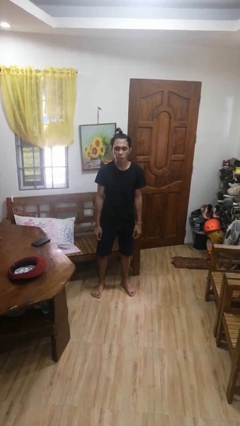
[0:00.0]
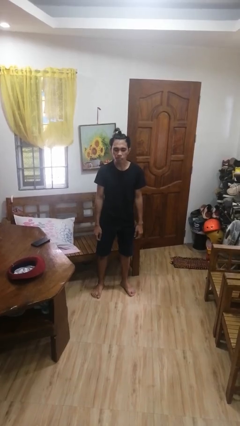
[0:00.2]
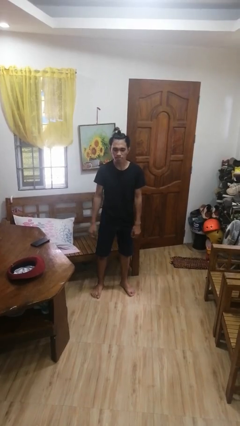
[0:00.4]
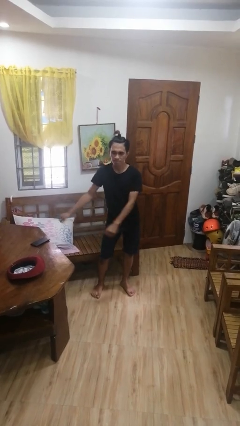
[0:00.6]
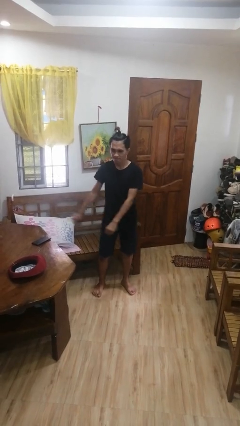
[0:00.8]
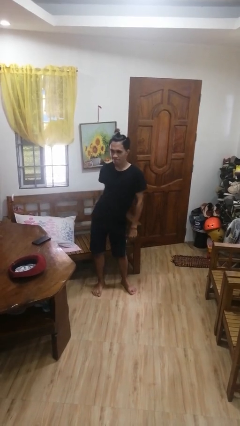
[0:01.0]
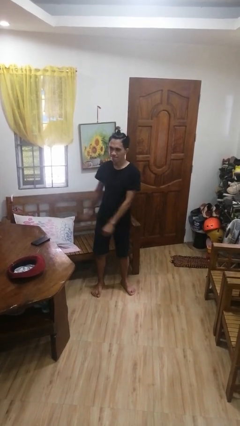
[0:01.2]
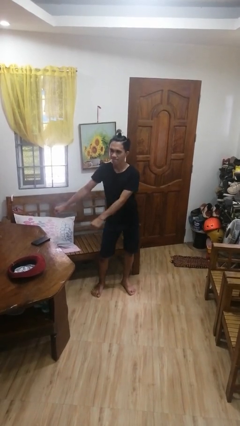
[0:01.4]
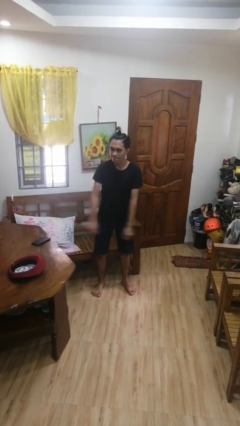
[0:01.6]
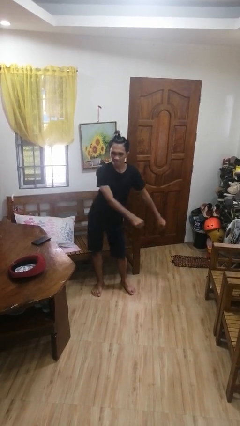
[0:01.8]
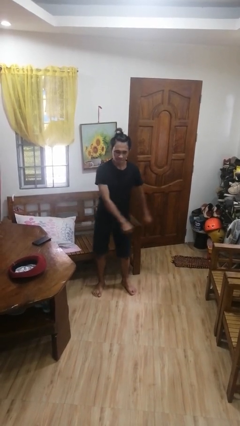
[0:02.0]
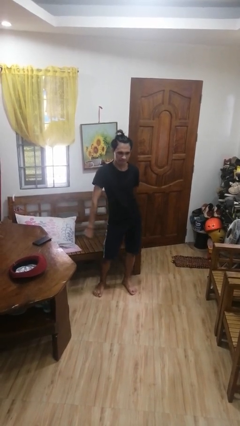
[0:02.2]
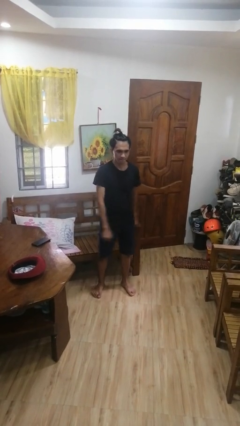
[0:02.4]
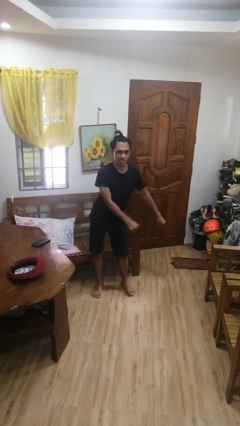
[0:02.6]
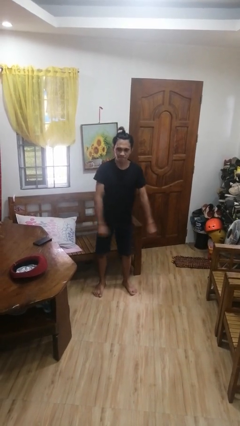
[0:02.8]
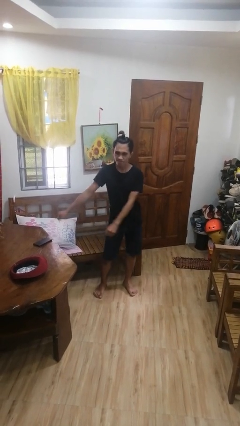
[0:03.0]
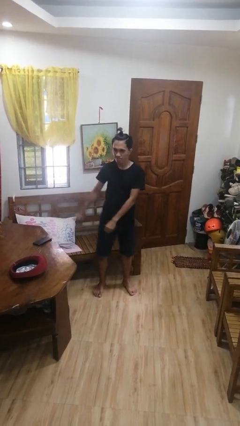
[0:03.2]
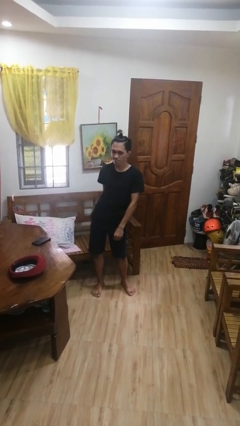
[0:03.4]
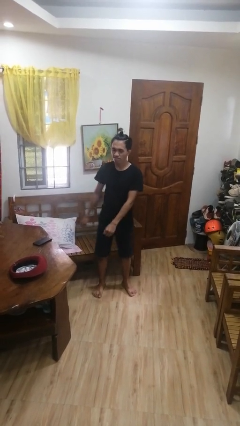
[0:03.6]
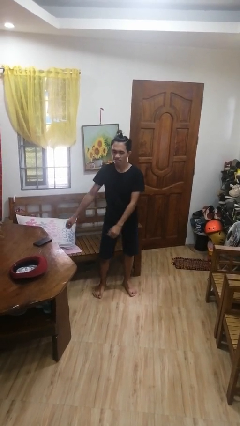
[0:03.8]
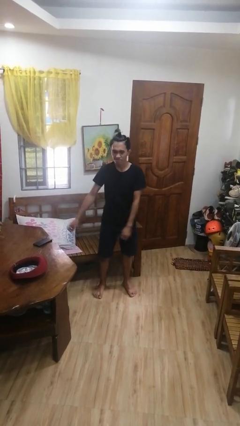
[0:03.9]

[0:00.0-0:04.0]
person dances in place

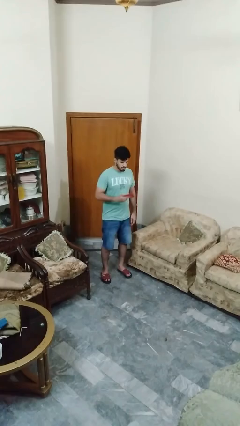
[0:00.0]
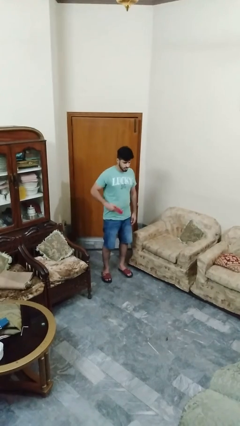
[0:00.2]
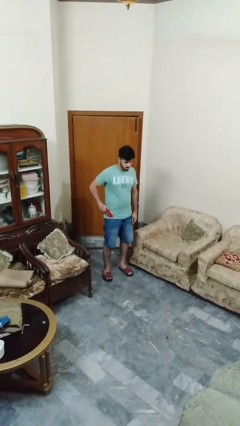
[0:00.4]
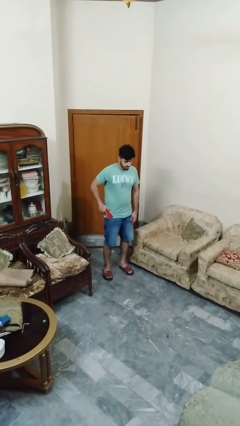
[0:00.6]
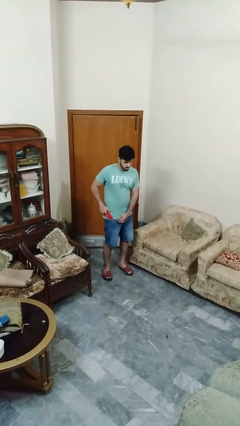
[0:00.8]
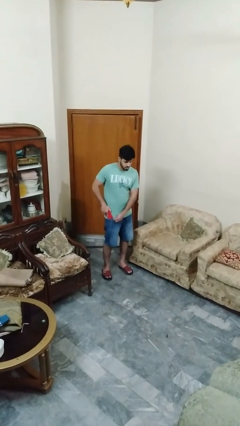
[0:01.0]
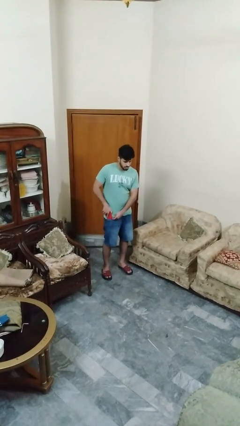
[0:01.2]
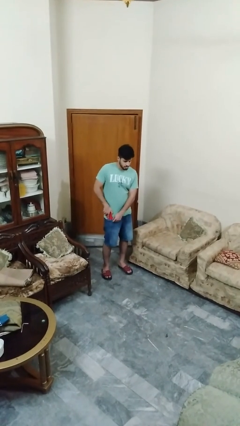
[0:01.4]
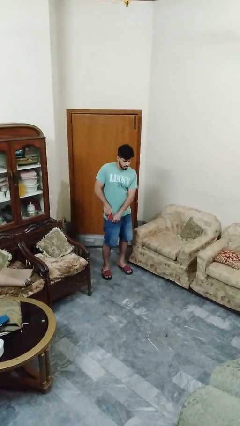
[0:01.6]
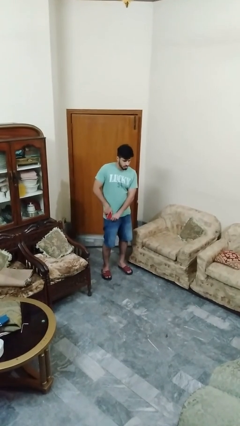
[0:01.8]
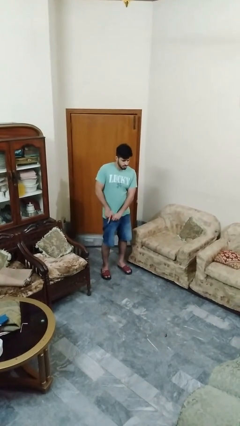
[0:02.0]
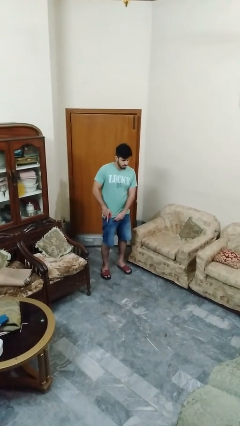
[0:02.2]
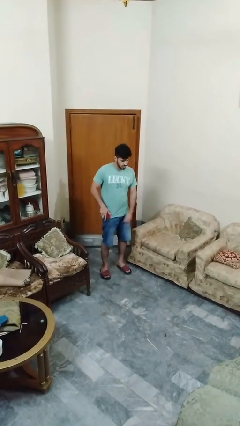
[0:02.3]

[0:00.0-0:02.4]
person puts phone into pocket

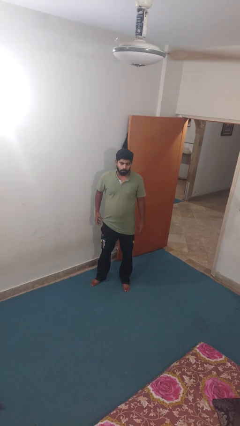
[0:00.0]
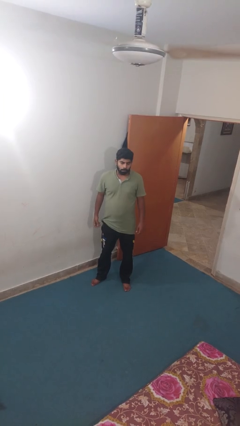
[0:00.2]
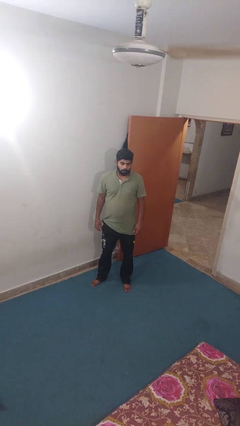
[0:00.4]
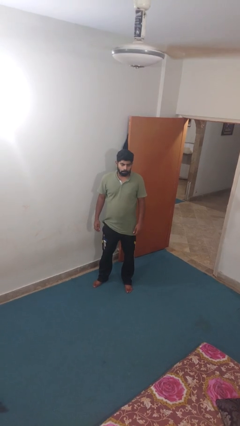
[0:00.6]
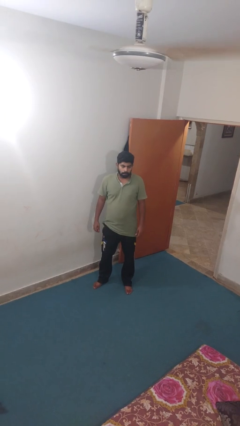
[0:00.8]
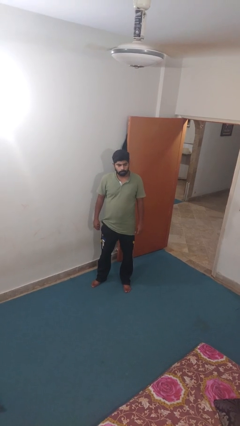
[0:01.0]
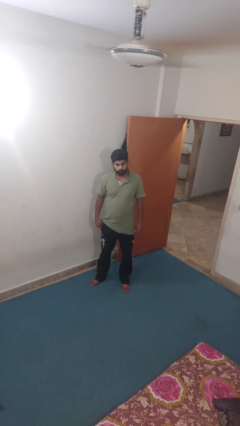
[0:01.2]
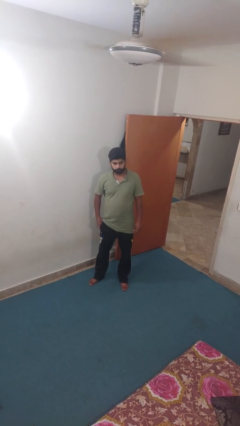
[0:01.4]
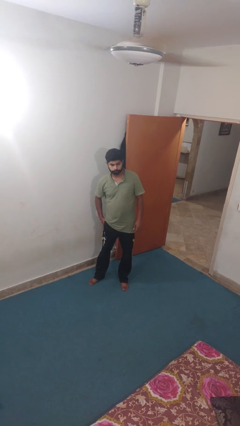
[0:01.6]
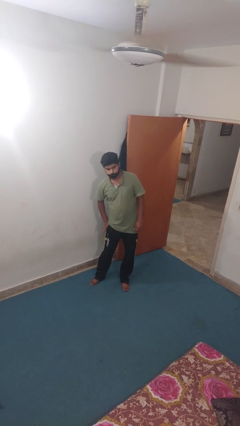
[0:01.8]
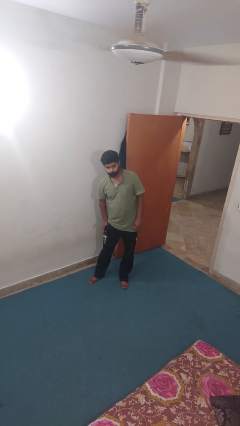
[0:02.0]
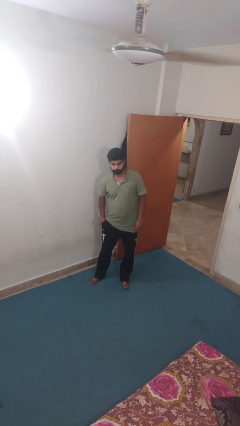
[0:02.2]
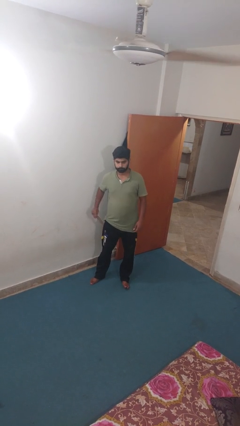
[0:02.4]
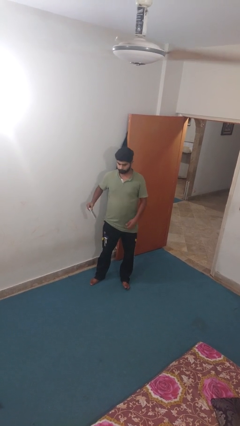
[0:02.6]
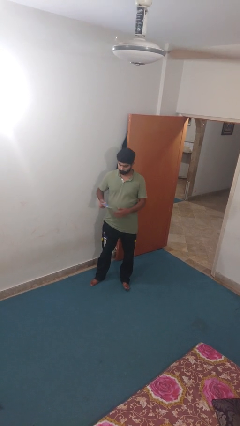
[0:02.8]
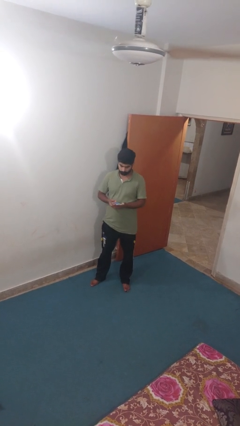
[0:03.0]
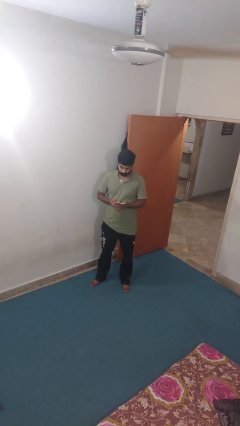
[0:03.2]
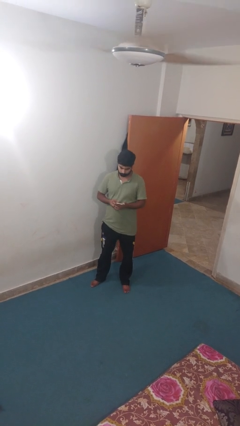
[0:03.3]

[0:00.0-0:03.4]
person takes phone from pocket

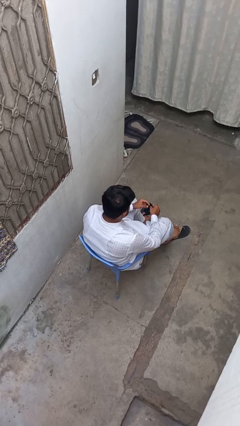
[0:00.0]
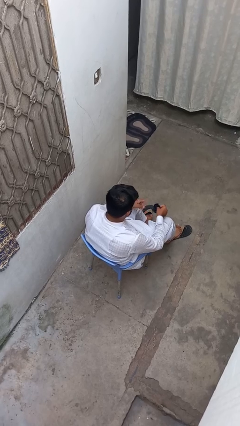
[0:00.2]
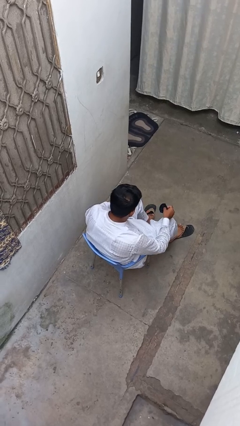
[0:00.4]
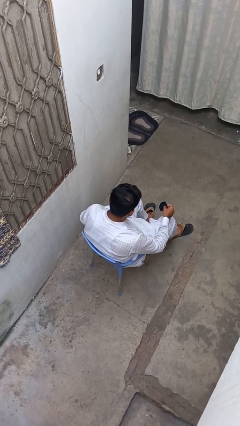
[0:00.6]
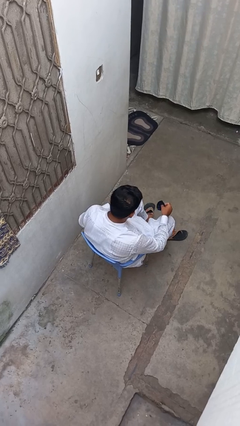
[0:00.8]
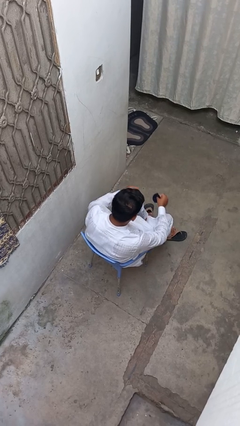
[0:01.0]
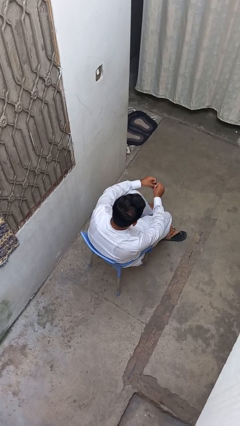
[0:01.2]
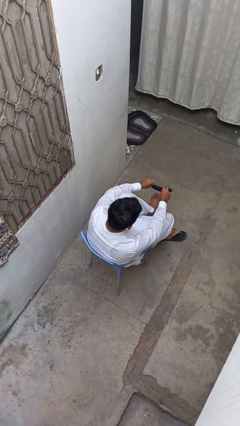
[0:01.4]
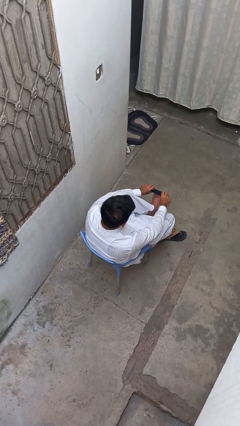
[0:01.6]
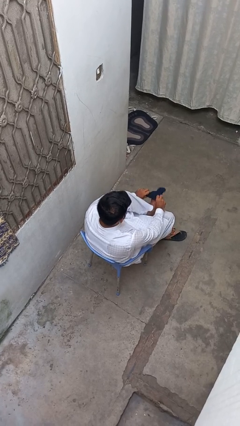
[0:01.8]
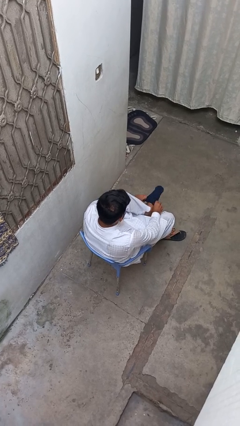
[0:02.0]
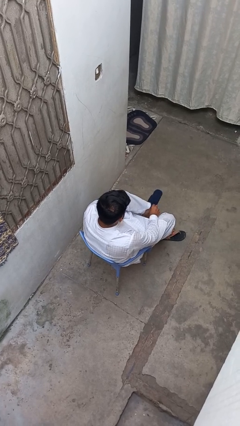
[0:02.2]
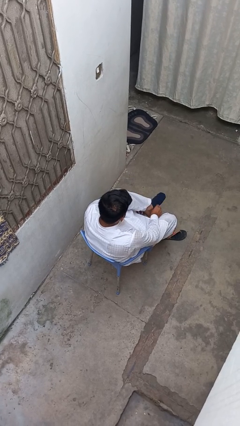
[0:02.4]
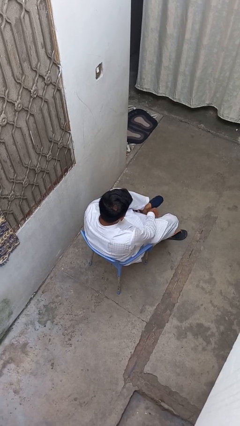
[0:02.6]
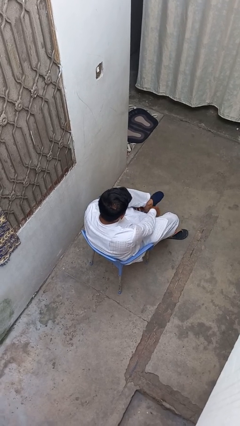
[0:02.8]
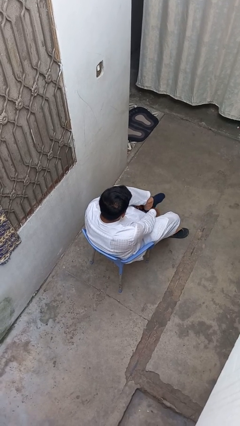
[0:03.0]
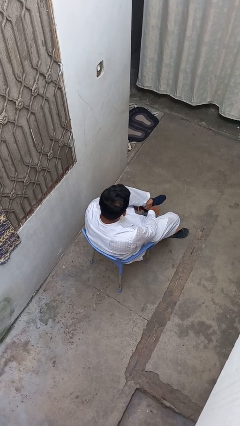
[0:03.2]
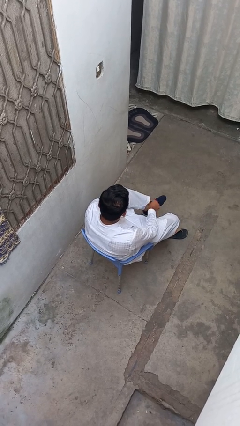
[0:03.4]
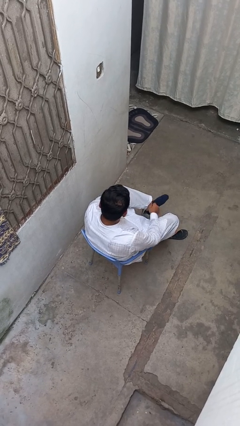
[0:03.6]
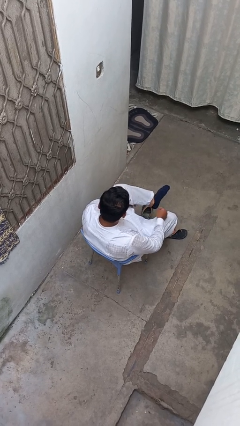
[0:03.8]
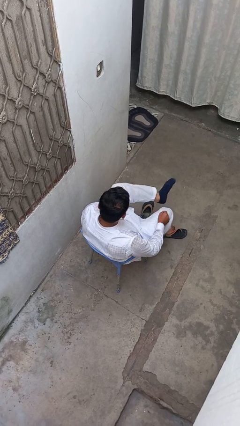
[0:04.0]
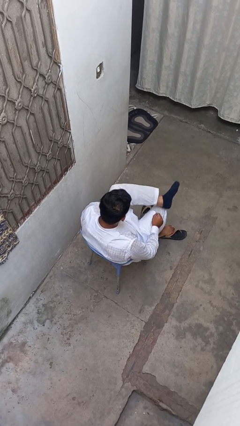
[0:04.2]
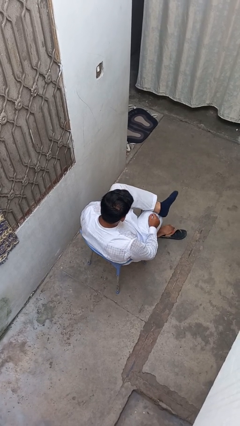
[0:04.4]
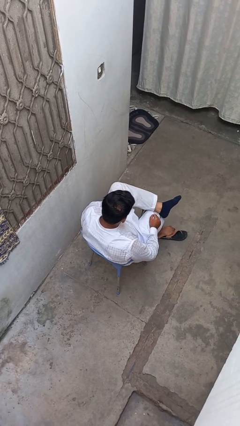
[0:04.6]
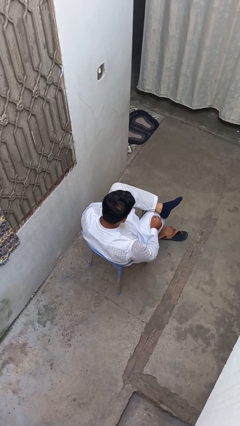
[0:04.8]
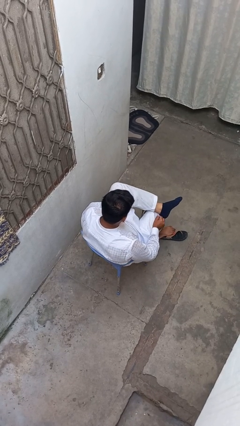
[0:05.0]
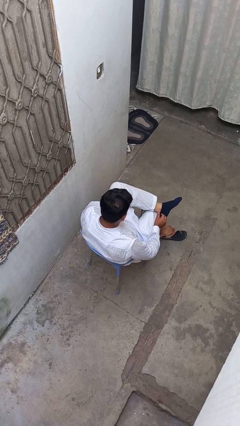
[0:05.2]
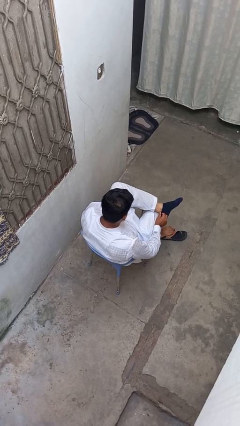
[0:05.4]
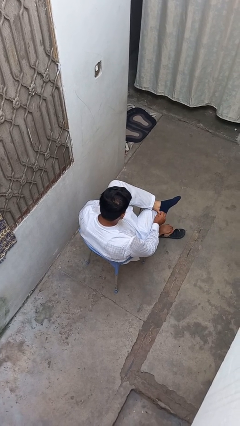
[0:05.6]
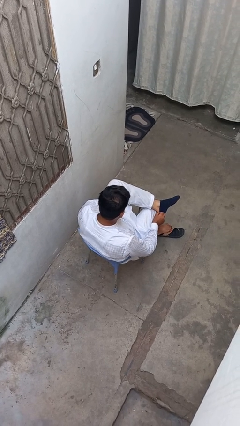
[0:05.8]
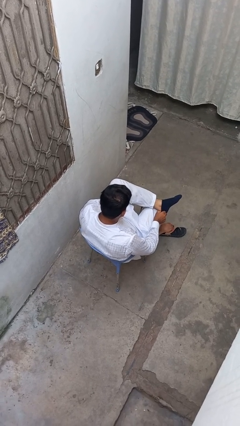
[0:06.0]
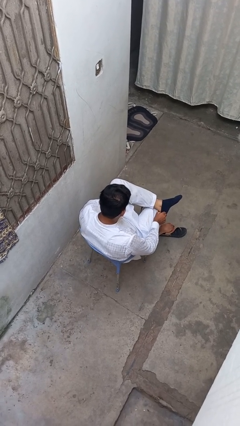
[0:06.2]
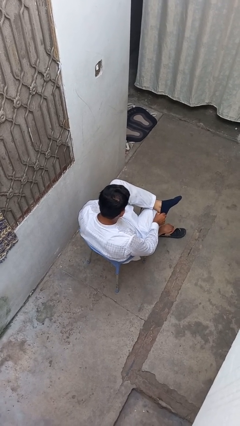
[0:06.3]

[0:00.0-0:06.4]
person puts on socks

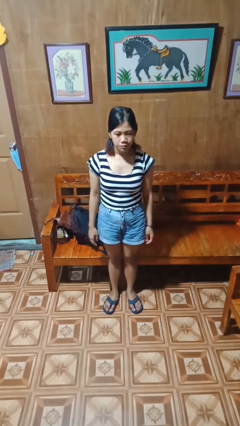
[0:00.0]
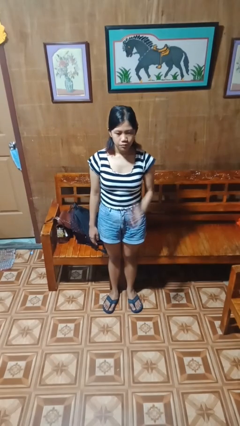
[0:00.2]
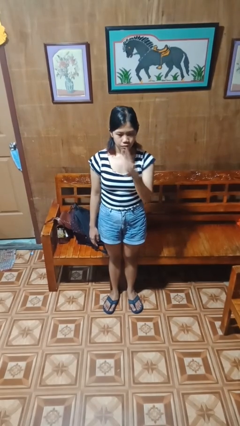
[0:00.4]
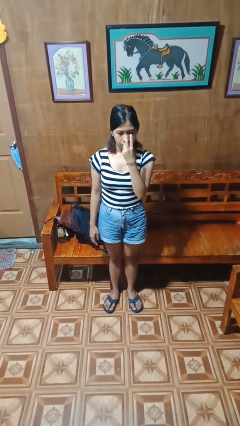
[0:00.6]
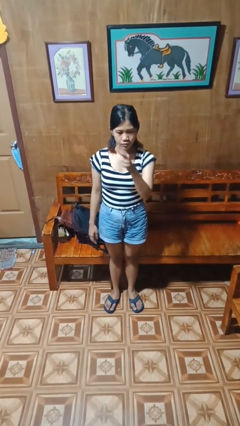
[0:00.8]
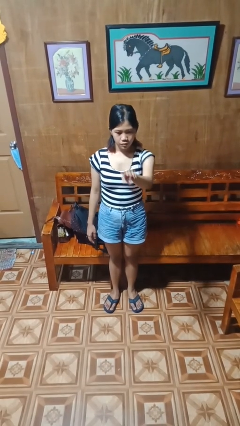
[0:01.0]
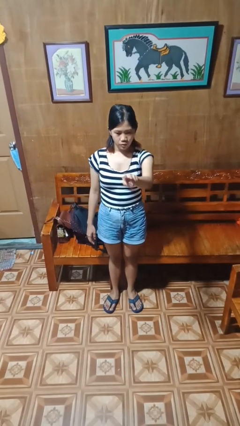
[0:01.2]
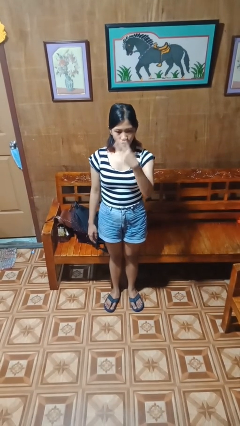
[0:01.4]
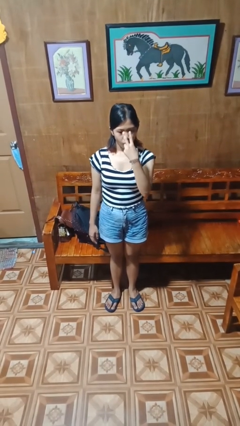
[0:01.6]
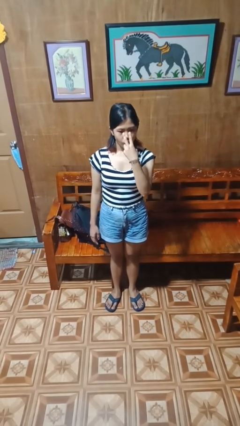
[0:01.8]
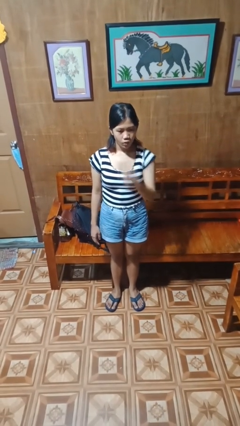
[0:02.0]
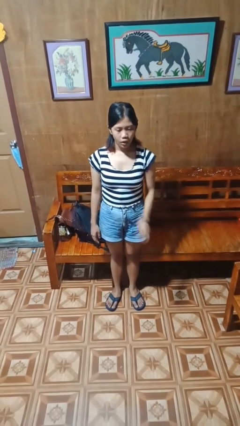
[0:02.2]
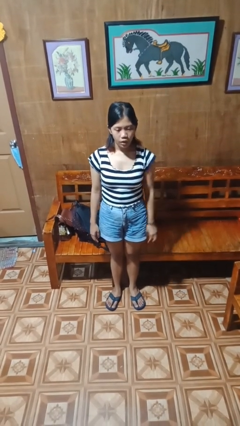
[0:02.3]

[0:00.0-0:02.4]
person gestures watch closely
